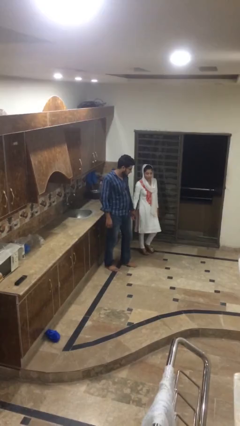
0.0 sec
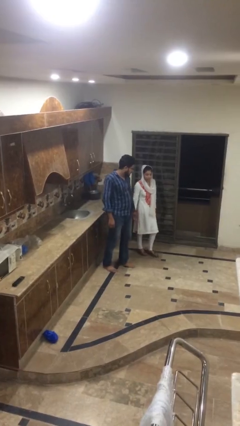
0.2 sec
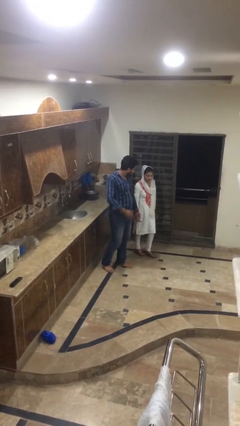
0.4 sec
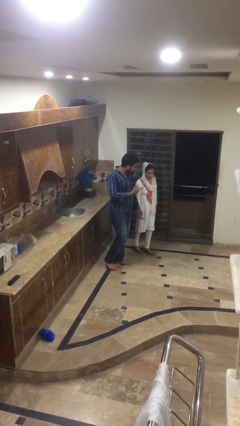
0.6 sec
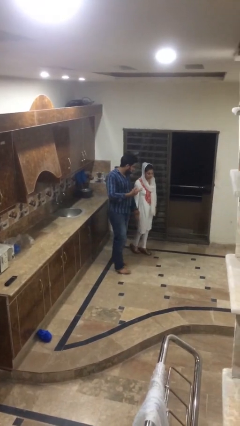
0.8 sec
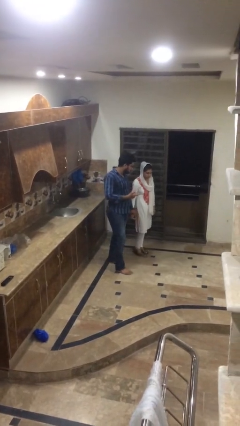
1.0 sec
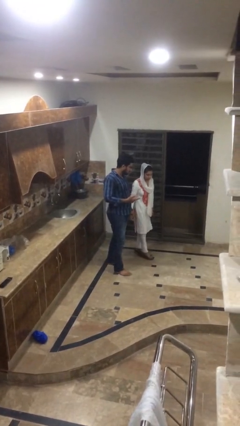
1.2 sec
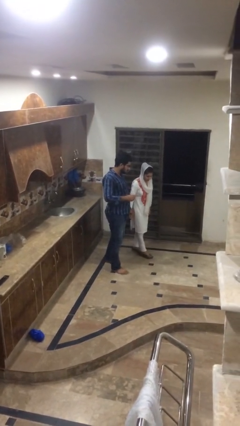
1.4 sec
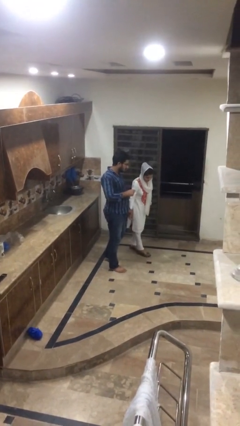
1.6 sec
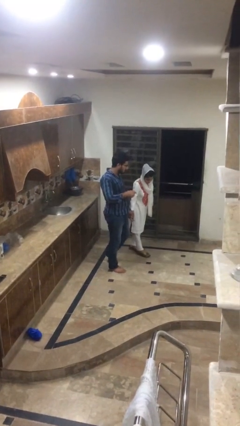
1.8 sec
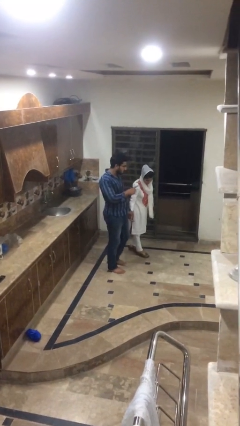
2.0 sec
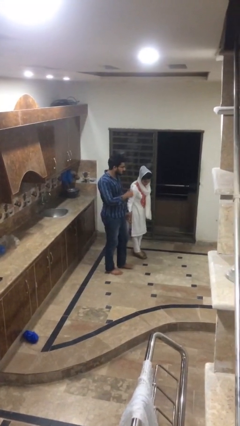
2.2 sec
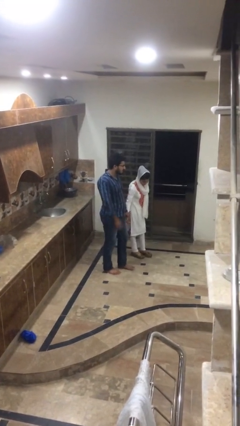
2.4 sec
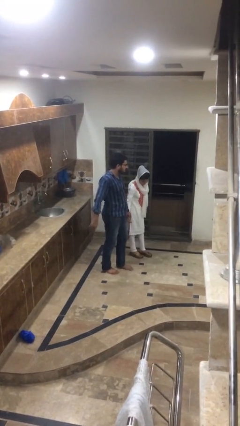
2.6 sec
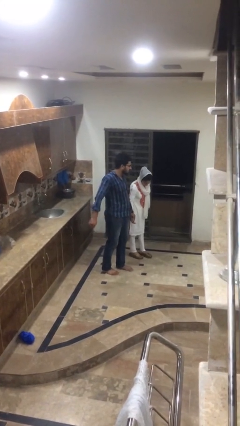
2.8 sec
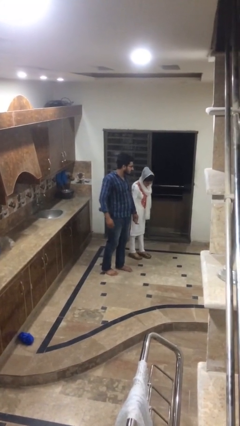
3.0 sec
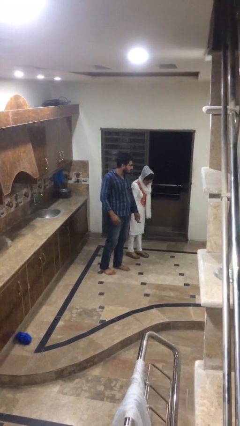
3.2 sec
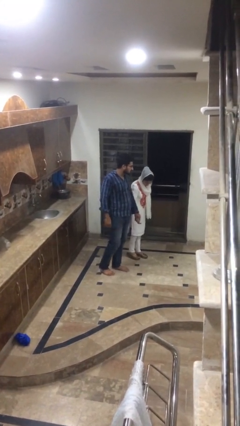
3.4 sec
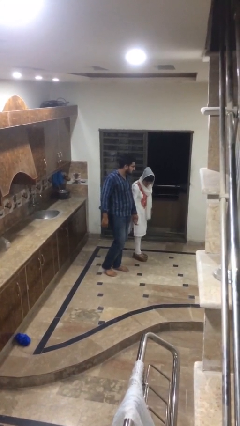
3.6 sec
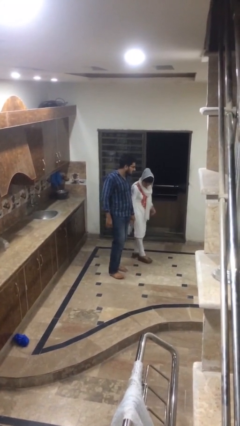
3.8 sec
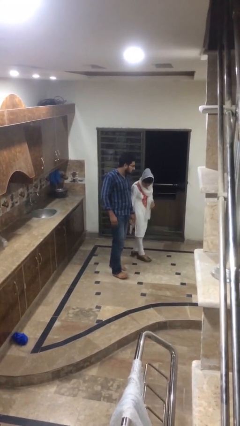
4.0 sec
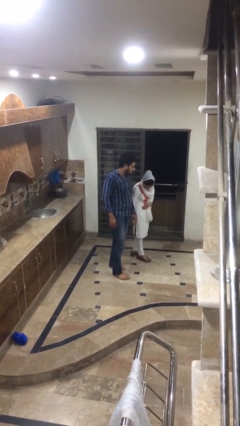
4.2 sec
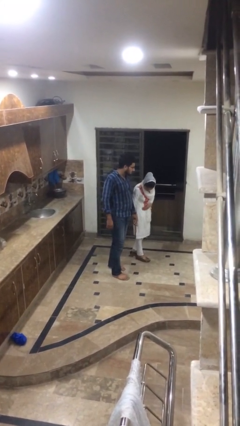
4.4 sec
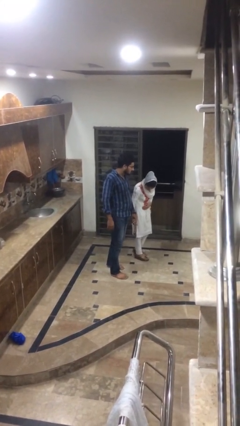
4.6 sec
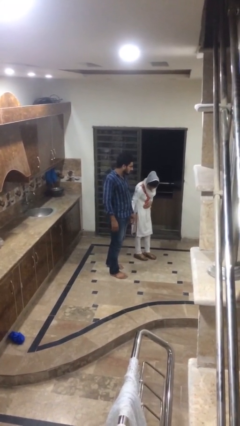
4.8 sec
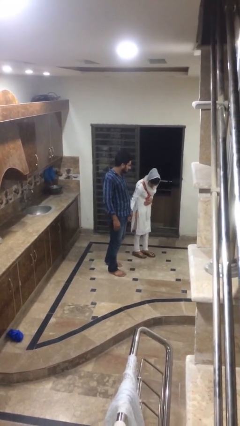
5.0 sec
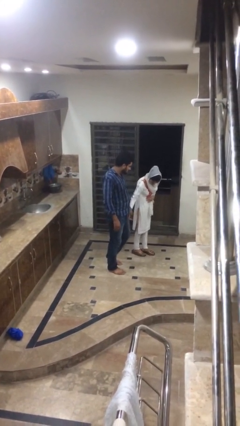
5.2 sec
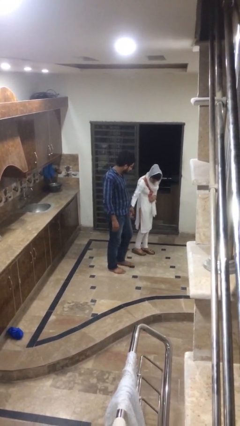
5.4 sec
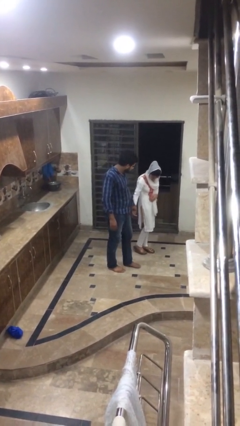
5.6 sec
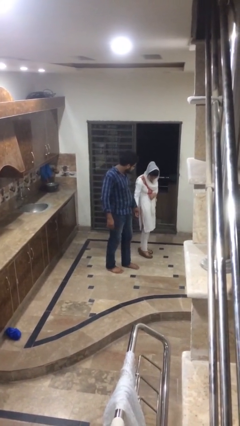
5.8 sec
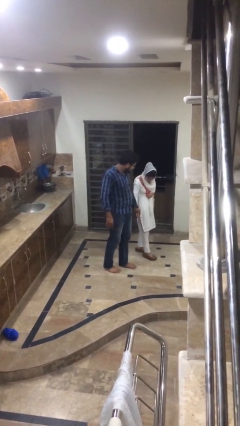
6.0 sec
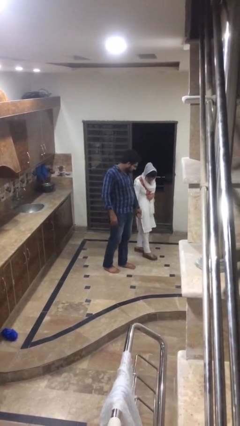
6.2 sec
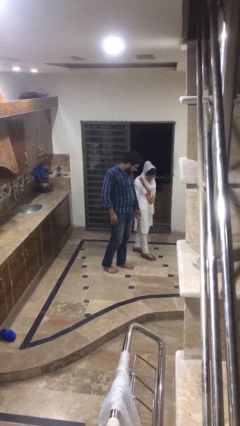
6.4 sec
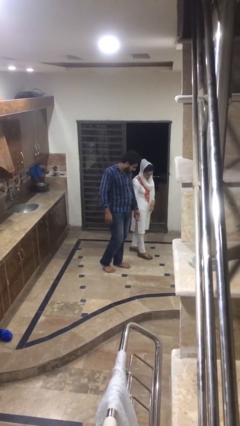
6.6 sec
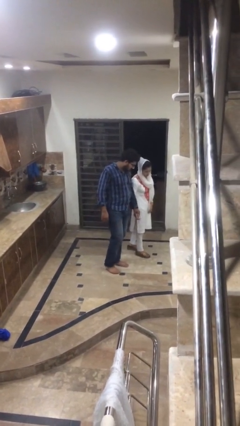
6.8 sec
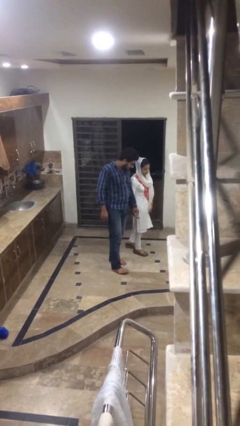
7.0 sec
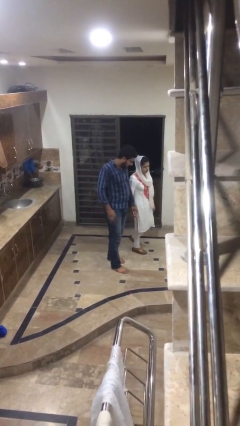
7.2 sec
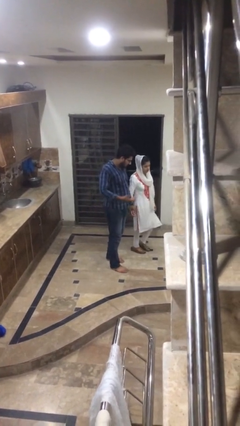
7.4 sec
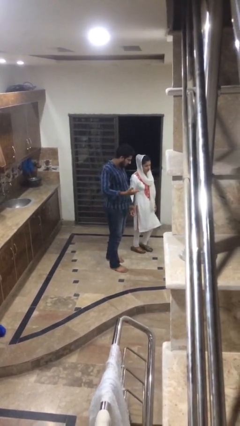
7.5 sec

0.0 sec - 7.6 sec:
person holds hand

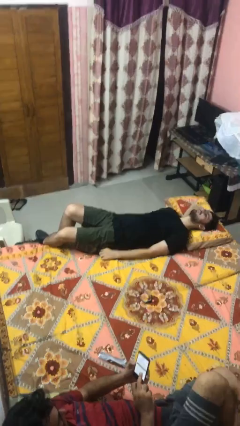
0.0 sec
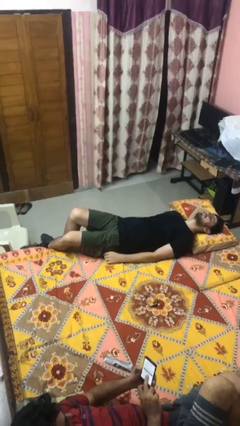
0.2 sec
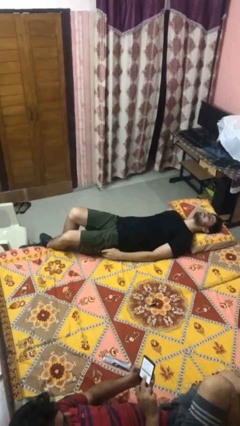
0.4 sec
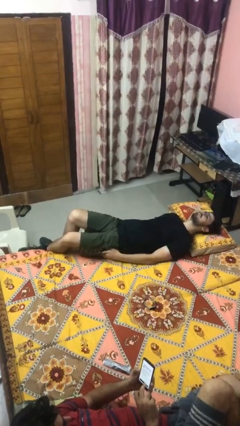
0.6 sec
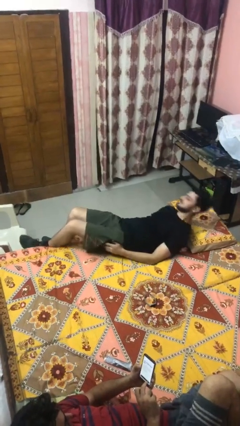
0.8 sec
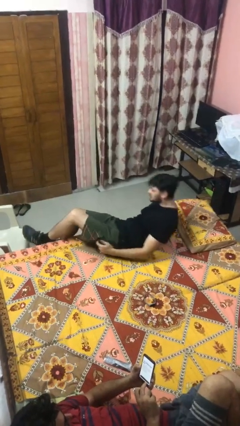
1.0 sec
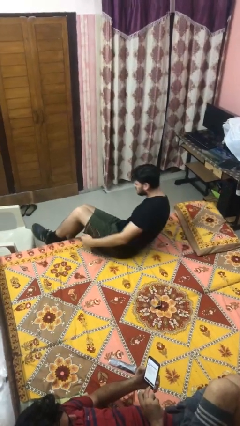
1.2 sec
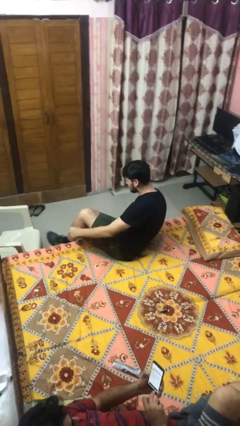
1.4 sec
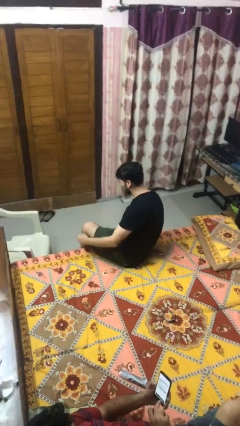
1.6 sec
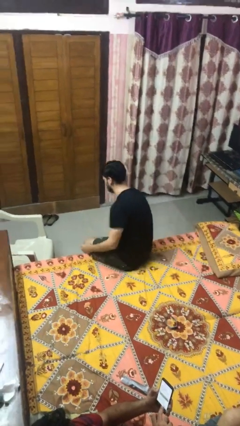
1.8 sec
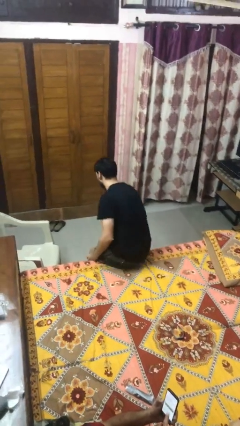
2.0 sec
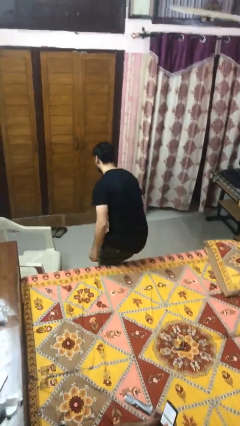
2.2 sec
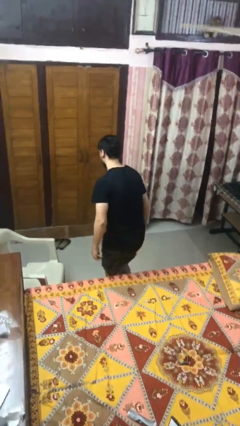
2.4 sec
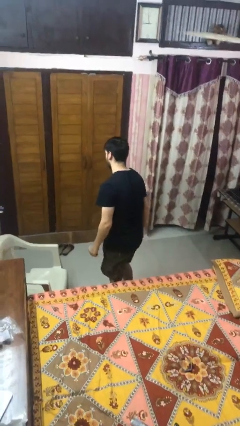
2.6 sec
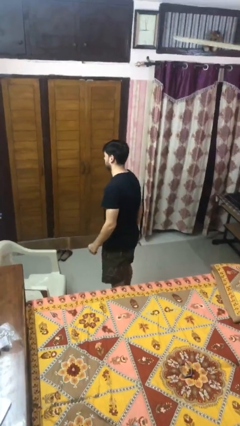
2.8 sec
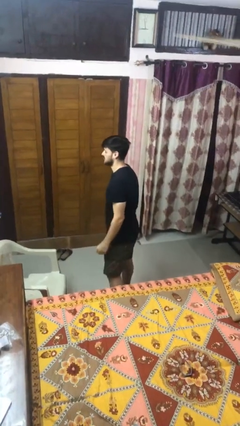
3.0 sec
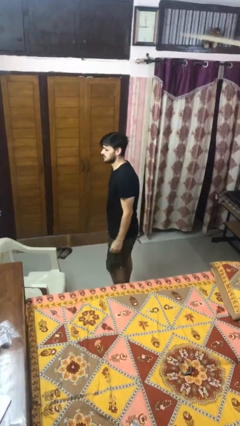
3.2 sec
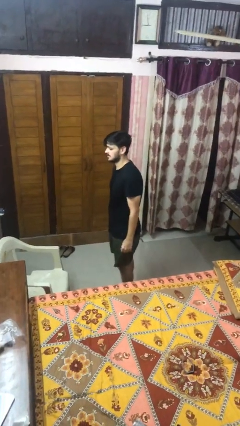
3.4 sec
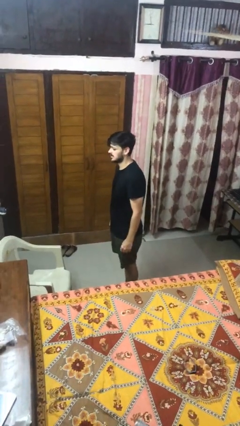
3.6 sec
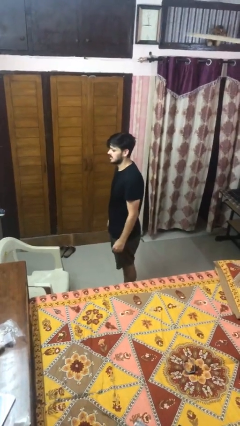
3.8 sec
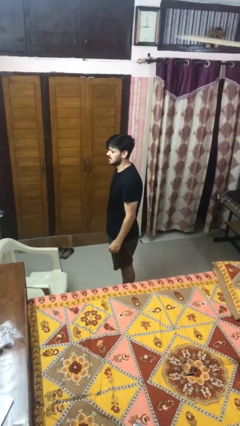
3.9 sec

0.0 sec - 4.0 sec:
person stands up

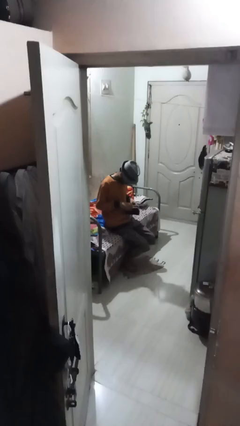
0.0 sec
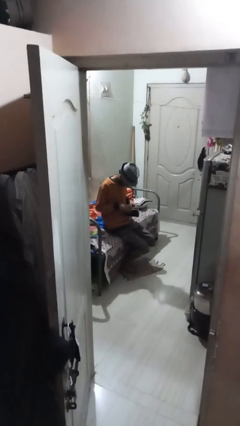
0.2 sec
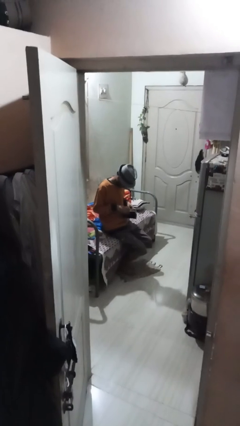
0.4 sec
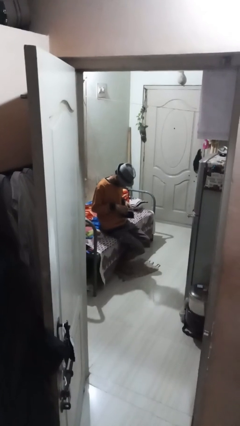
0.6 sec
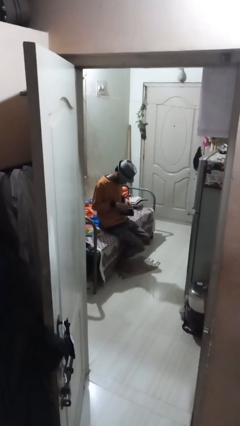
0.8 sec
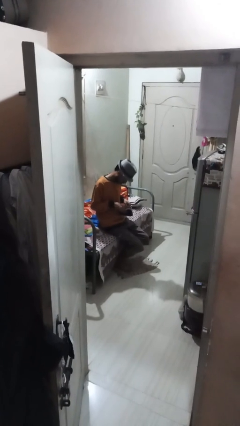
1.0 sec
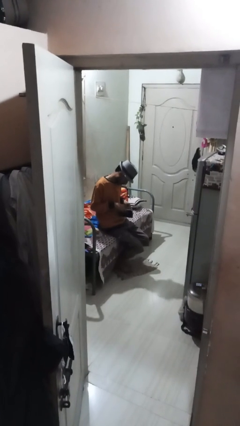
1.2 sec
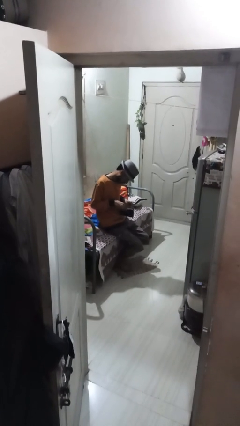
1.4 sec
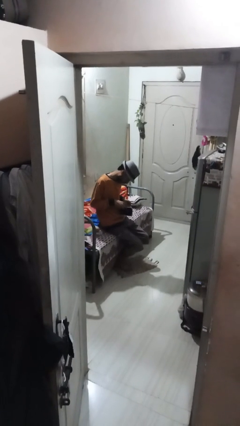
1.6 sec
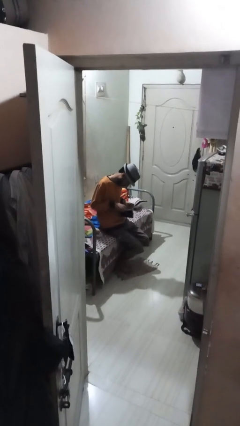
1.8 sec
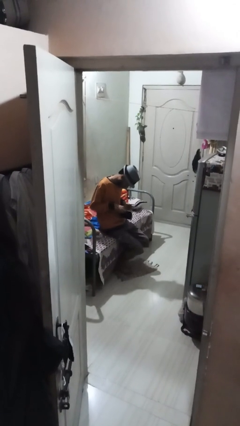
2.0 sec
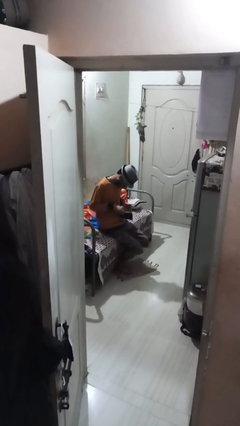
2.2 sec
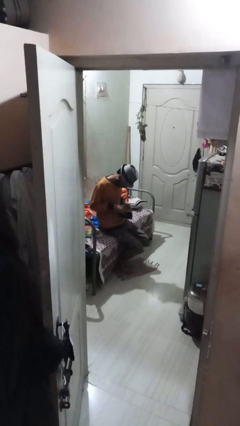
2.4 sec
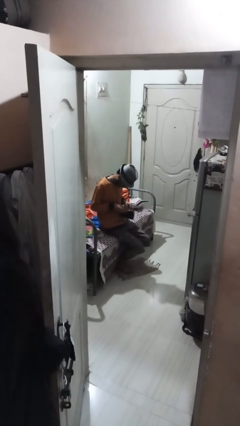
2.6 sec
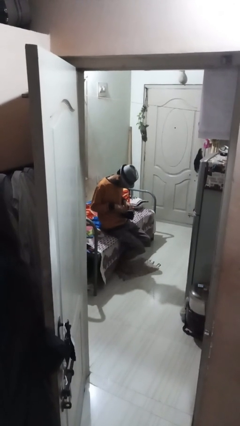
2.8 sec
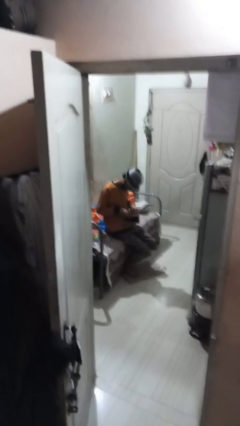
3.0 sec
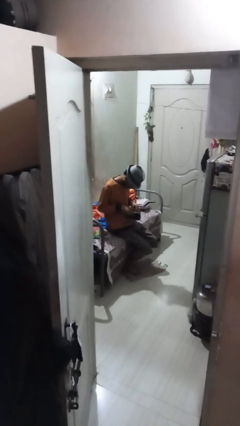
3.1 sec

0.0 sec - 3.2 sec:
person searches in purse

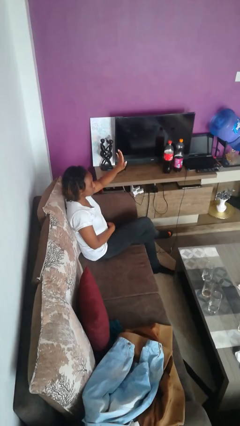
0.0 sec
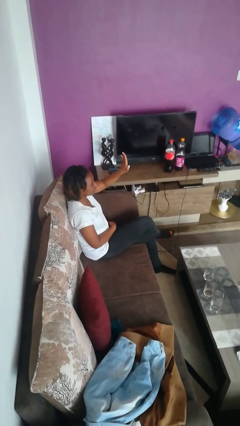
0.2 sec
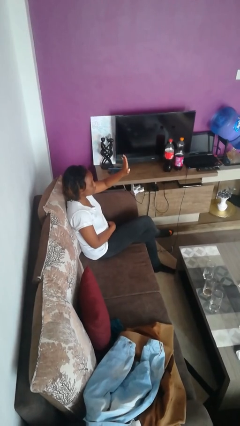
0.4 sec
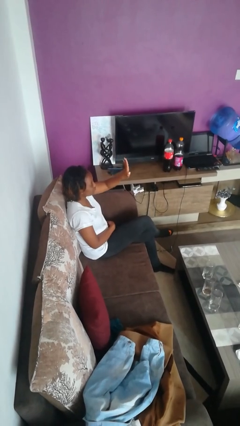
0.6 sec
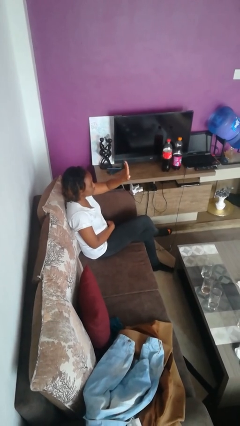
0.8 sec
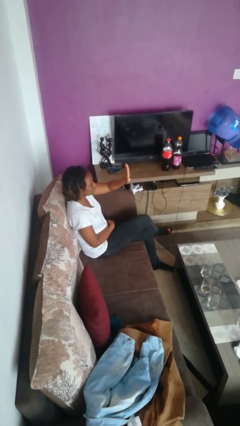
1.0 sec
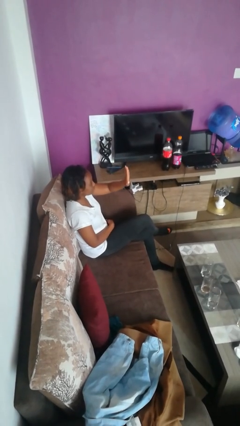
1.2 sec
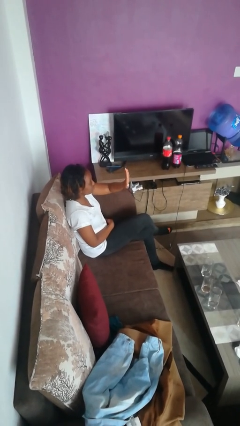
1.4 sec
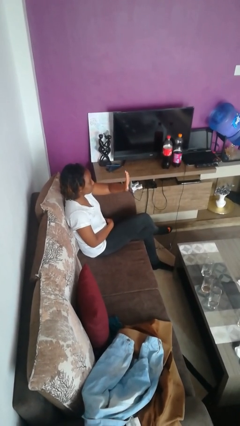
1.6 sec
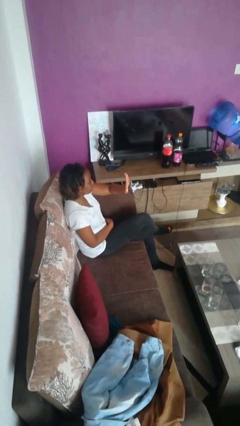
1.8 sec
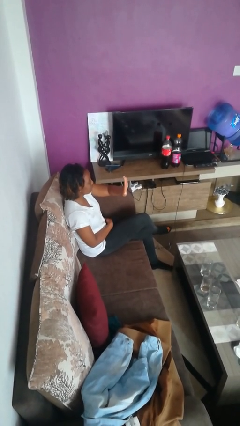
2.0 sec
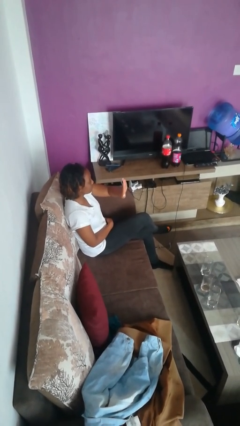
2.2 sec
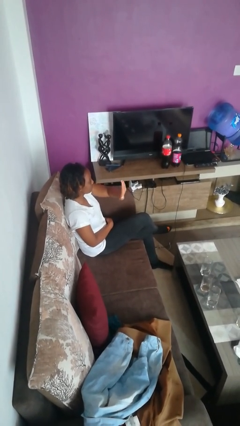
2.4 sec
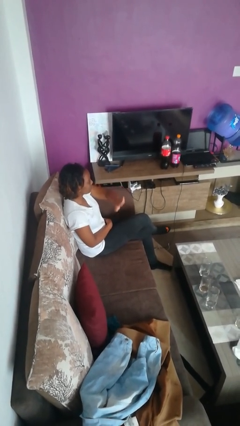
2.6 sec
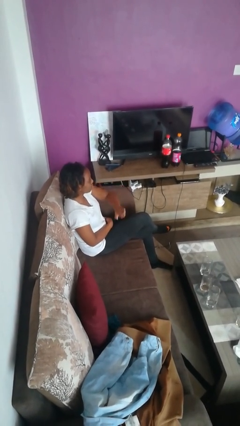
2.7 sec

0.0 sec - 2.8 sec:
person gestures swipe right
